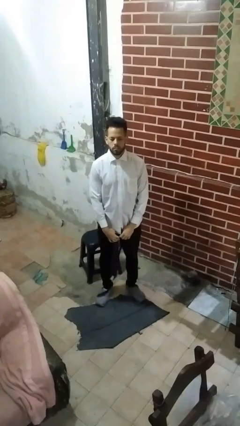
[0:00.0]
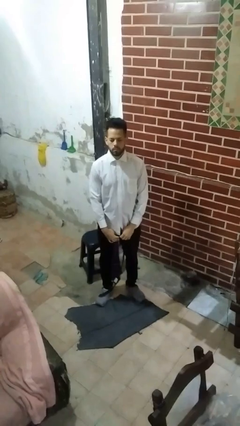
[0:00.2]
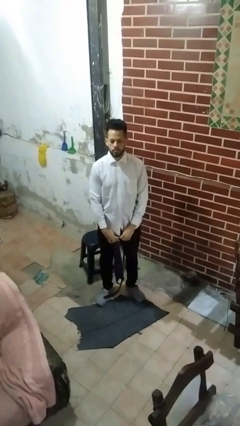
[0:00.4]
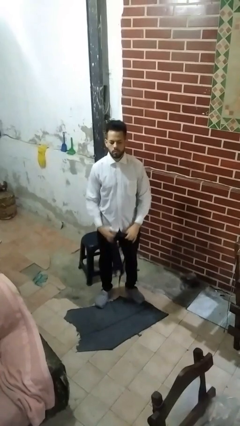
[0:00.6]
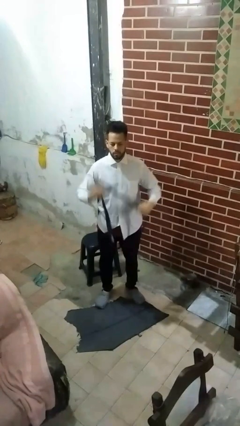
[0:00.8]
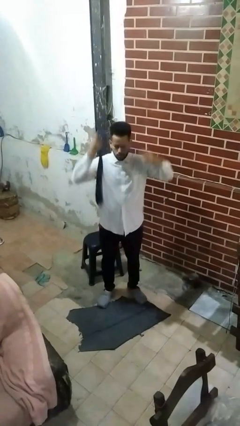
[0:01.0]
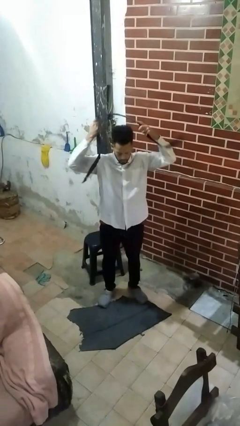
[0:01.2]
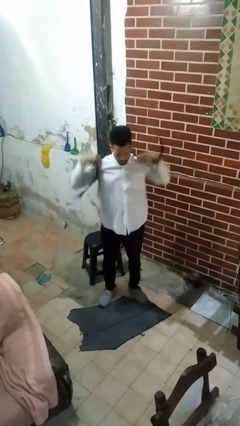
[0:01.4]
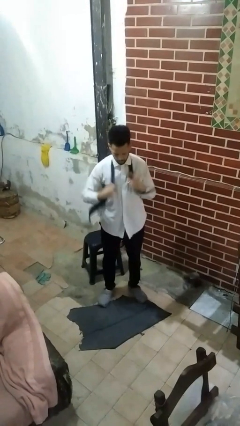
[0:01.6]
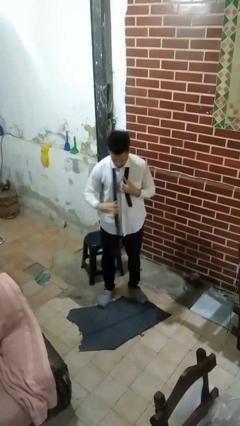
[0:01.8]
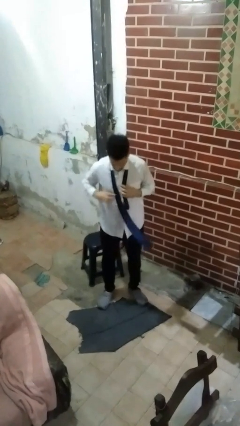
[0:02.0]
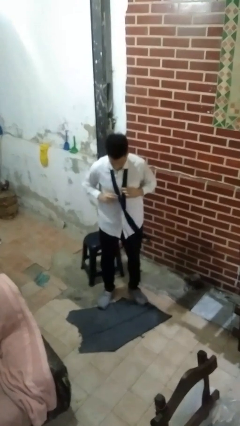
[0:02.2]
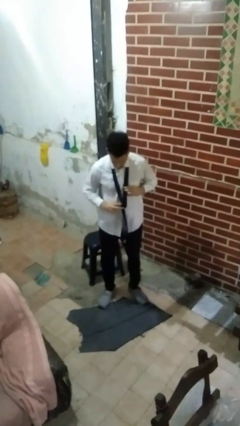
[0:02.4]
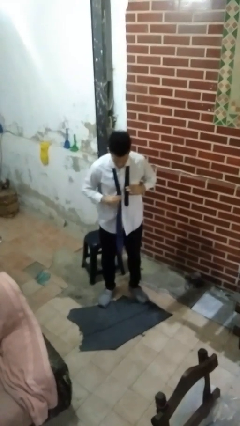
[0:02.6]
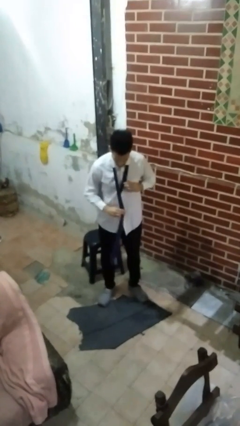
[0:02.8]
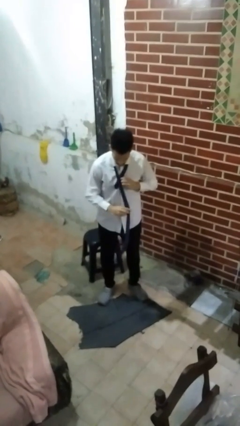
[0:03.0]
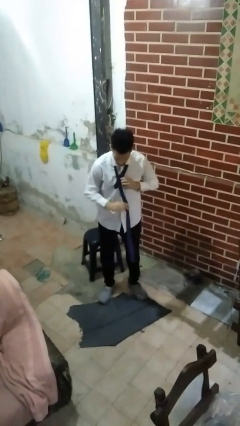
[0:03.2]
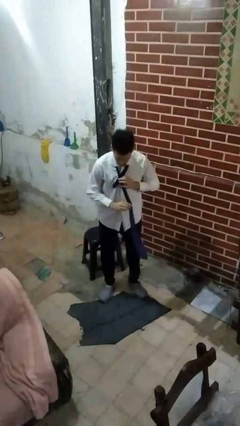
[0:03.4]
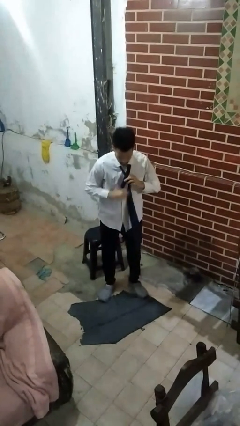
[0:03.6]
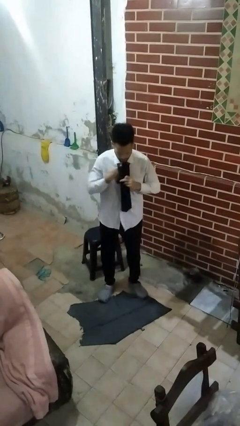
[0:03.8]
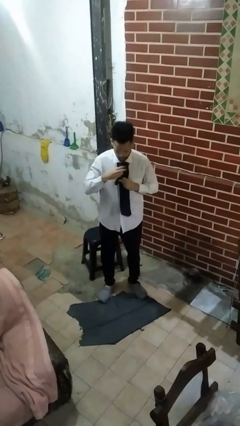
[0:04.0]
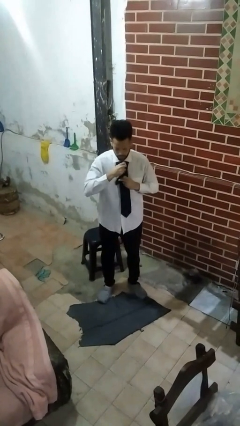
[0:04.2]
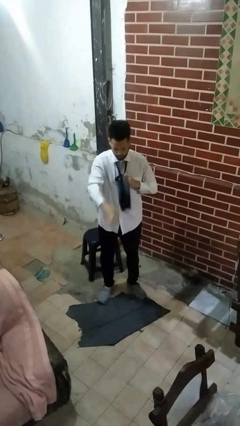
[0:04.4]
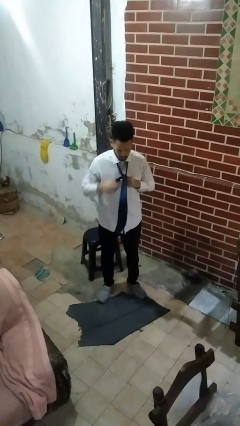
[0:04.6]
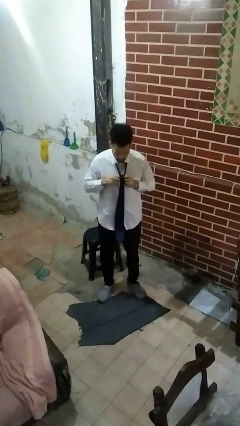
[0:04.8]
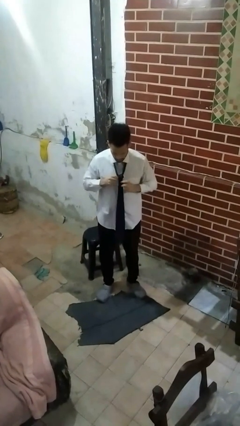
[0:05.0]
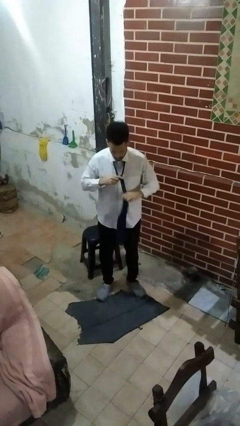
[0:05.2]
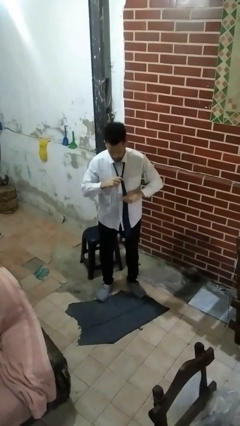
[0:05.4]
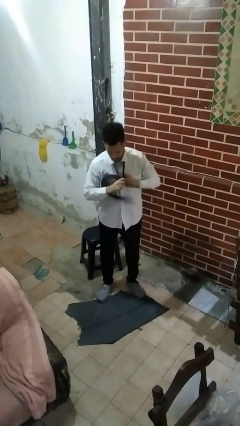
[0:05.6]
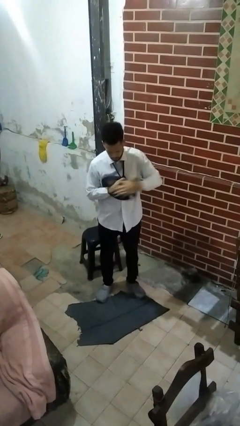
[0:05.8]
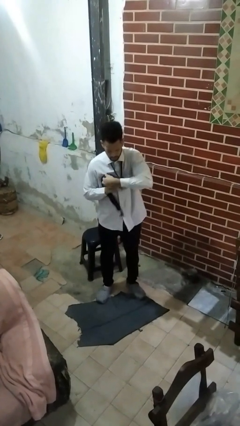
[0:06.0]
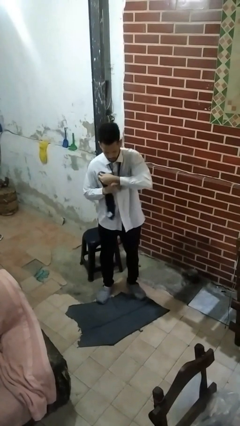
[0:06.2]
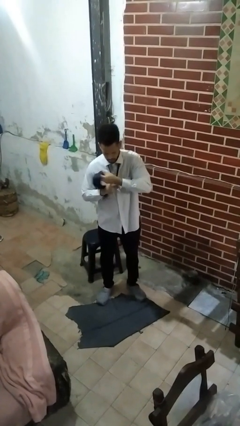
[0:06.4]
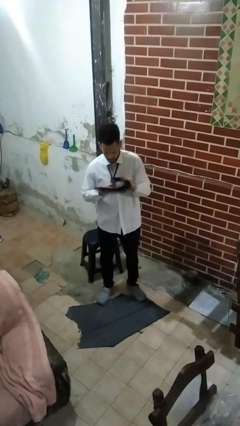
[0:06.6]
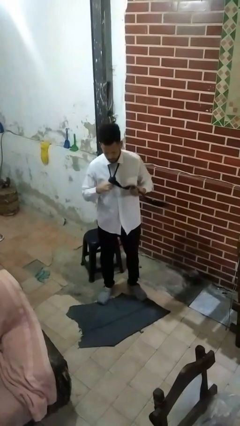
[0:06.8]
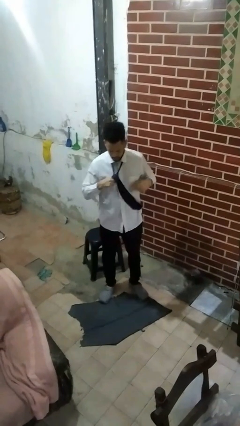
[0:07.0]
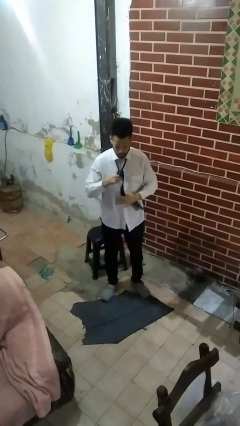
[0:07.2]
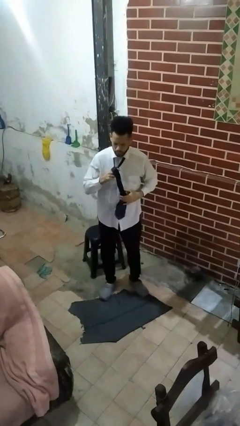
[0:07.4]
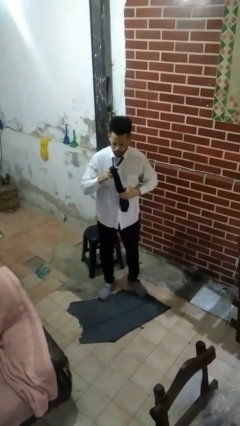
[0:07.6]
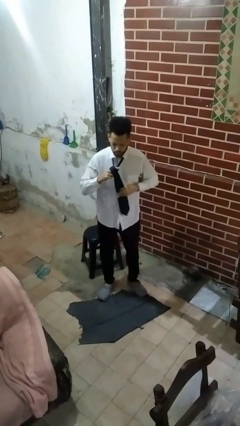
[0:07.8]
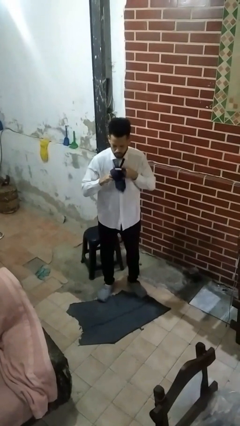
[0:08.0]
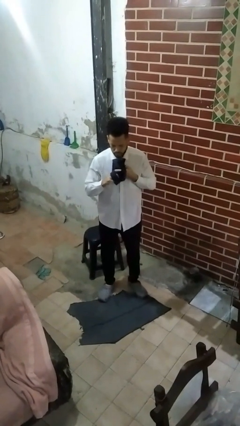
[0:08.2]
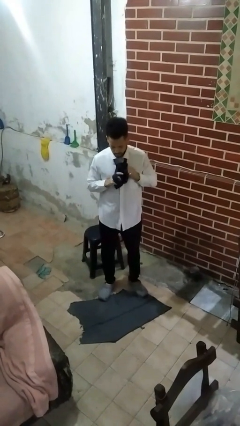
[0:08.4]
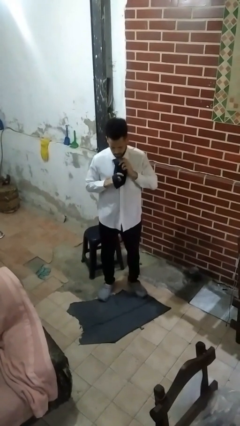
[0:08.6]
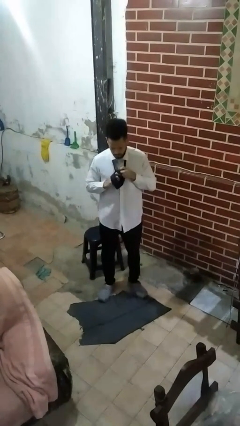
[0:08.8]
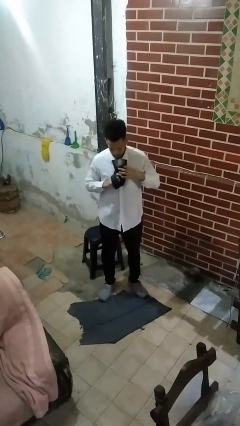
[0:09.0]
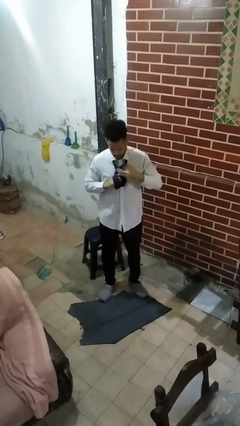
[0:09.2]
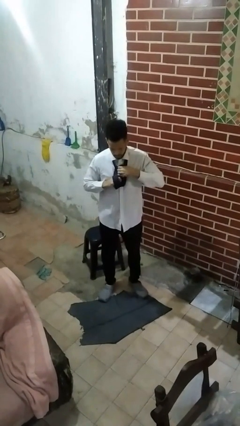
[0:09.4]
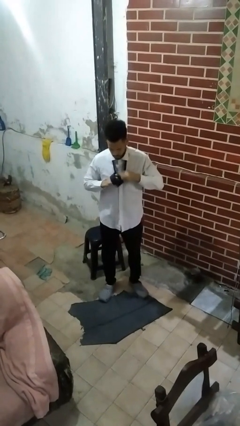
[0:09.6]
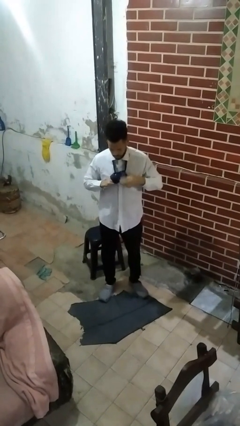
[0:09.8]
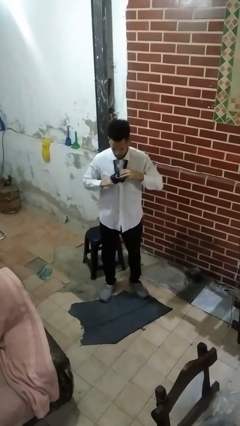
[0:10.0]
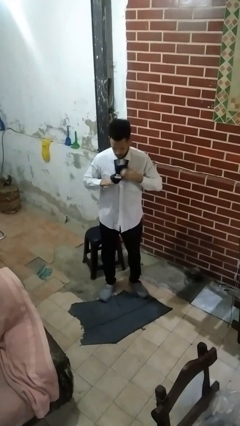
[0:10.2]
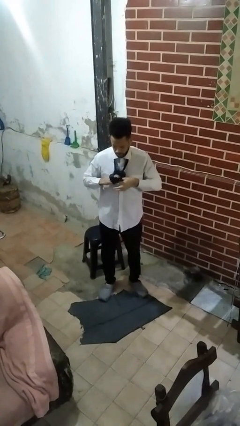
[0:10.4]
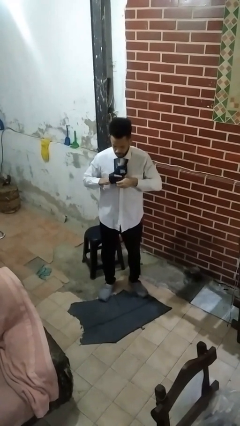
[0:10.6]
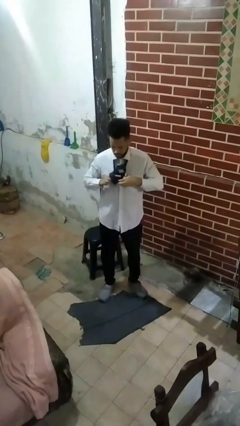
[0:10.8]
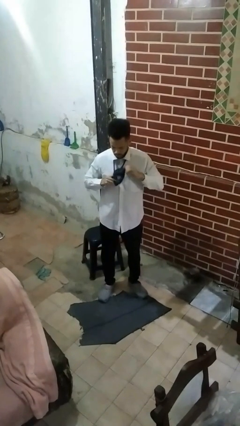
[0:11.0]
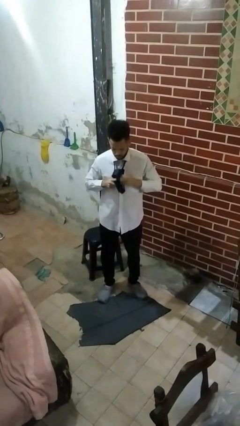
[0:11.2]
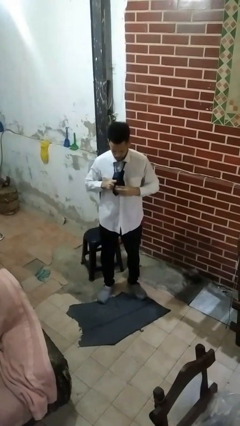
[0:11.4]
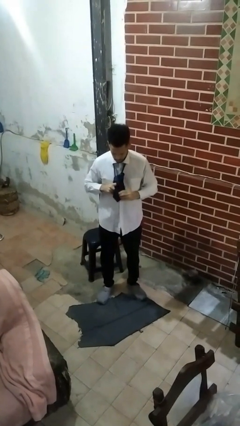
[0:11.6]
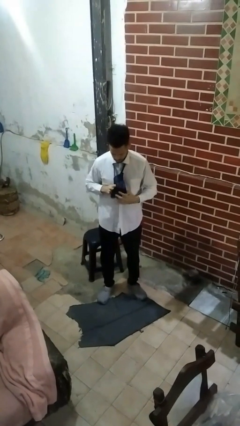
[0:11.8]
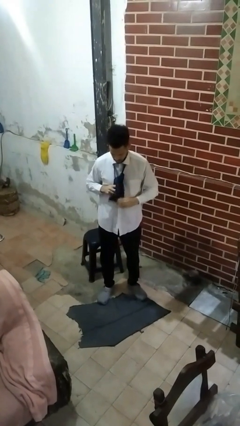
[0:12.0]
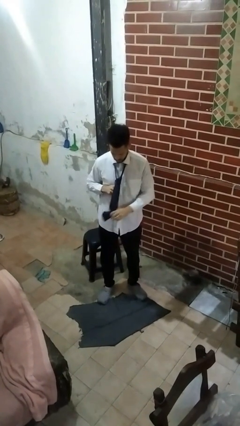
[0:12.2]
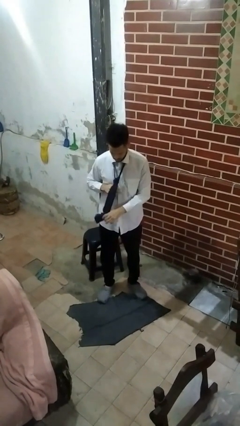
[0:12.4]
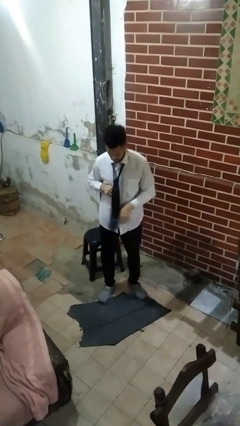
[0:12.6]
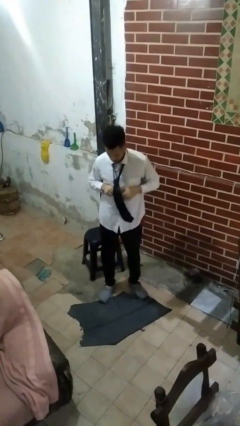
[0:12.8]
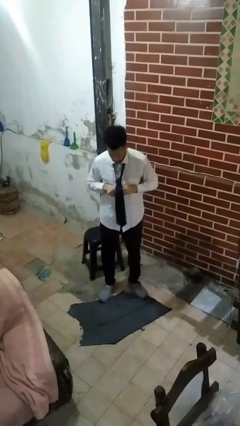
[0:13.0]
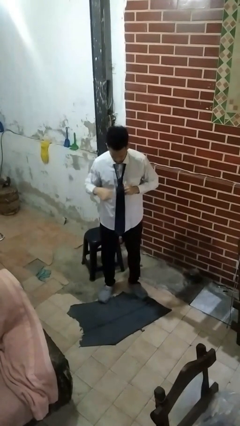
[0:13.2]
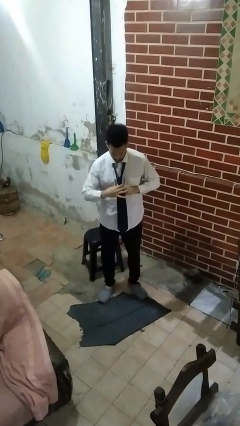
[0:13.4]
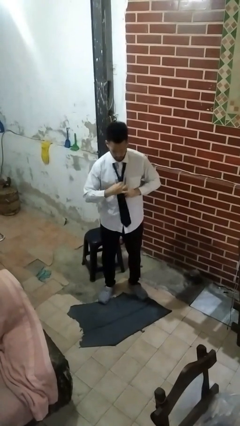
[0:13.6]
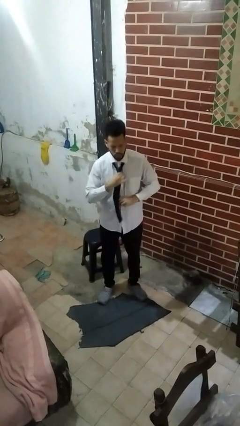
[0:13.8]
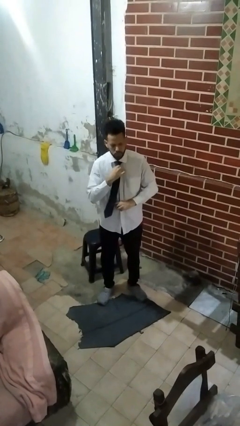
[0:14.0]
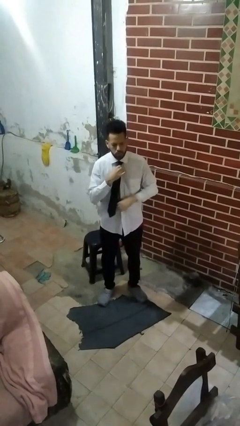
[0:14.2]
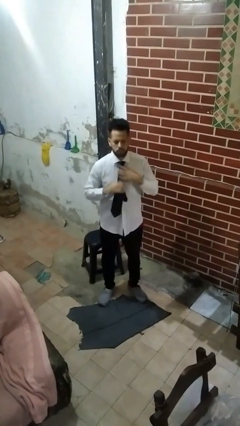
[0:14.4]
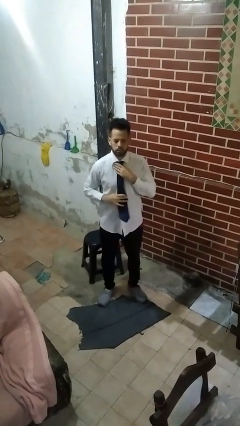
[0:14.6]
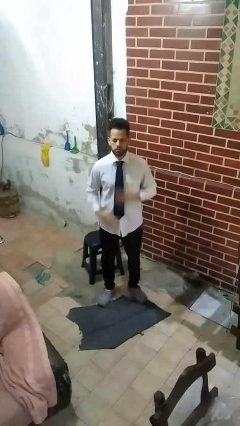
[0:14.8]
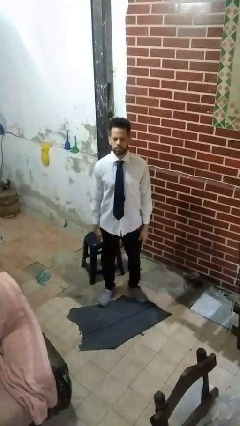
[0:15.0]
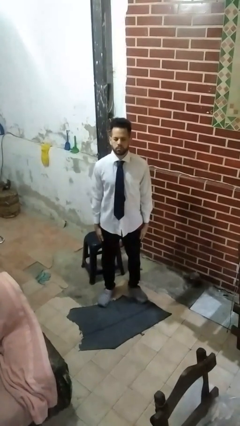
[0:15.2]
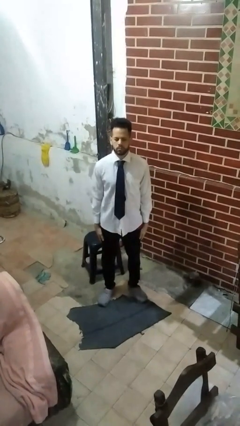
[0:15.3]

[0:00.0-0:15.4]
person puts on necktie

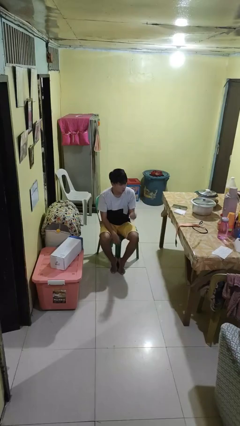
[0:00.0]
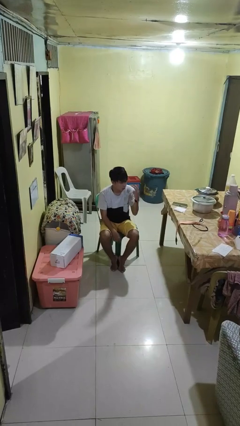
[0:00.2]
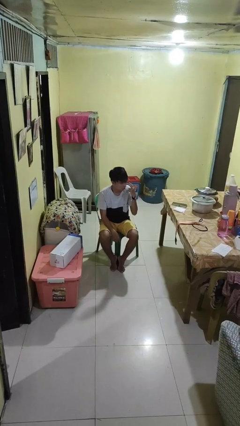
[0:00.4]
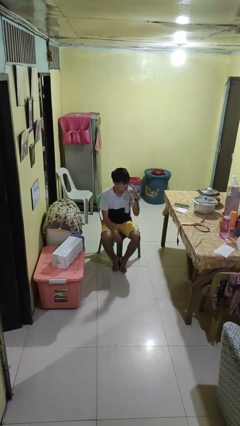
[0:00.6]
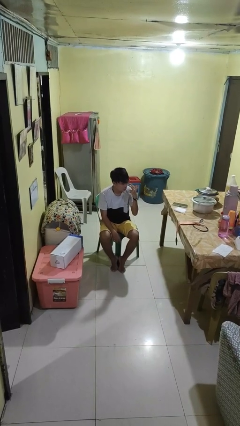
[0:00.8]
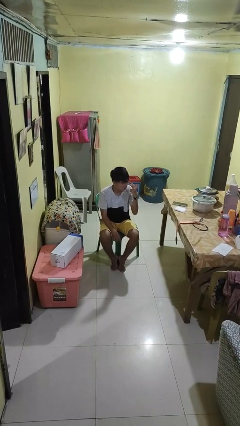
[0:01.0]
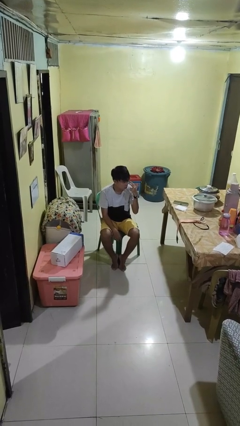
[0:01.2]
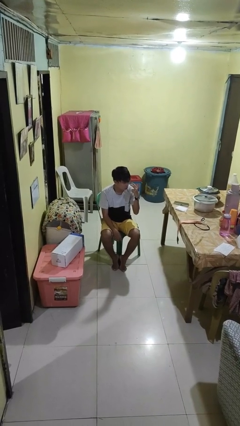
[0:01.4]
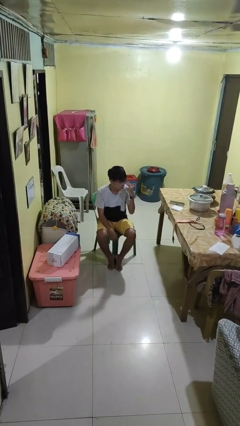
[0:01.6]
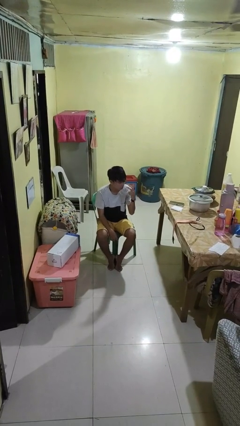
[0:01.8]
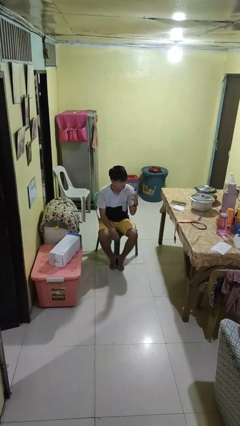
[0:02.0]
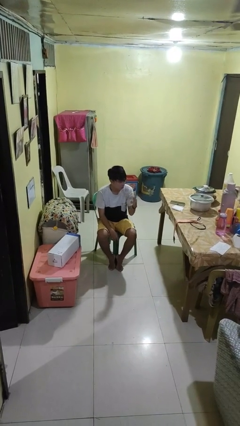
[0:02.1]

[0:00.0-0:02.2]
person gestures watch closely

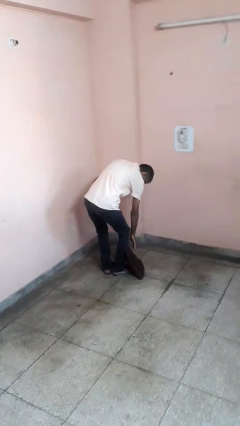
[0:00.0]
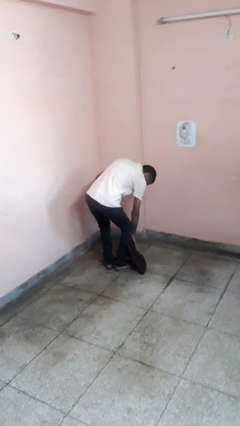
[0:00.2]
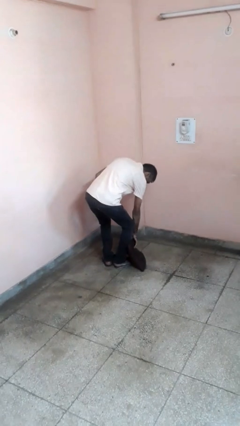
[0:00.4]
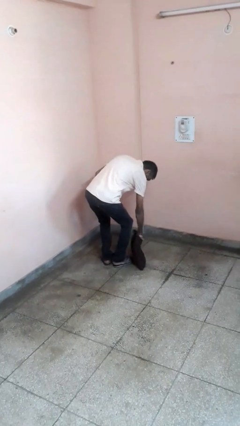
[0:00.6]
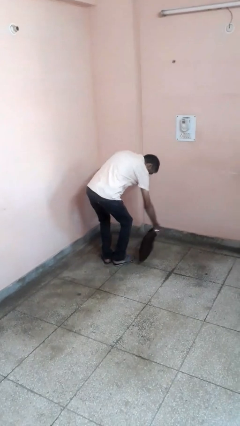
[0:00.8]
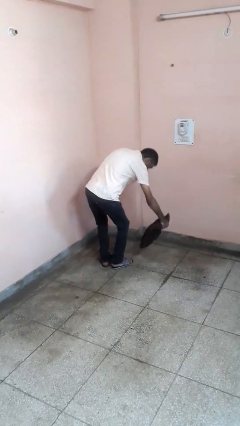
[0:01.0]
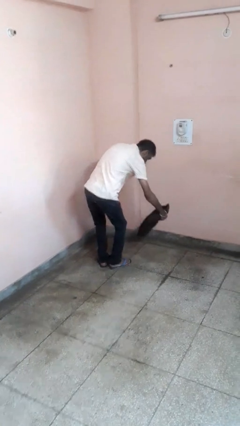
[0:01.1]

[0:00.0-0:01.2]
person picks up object from floor
